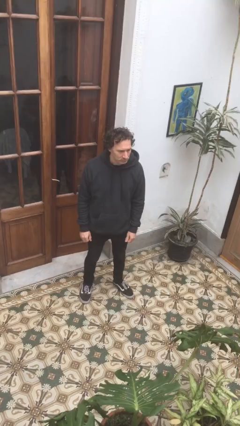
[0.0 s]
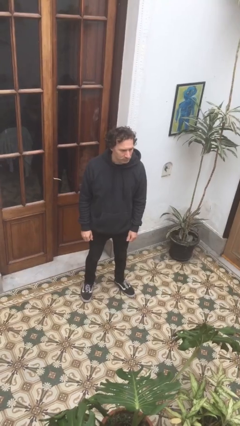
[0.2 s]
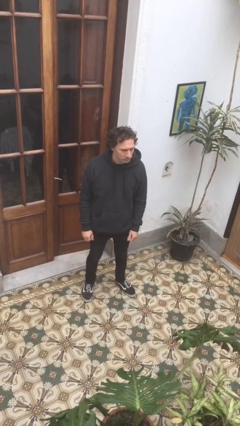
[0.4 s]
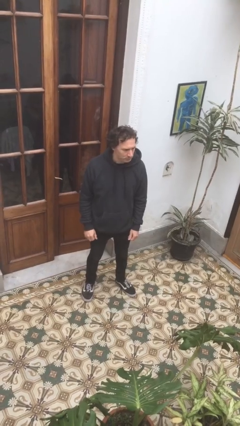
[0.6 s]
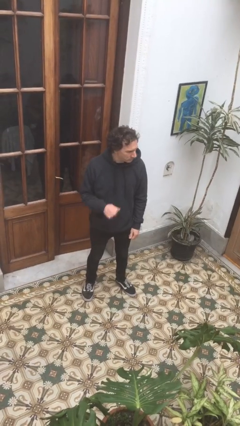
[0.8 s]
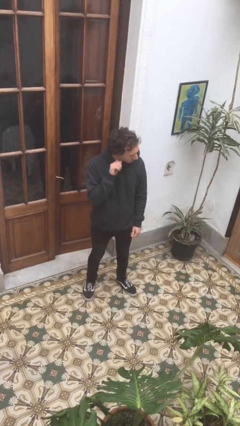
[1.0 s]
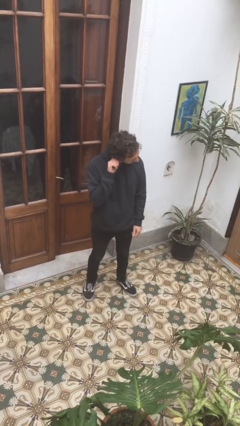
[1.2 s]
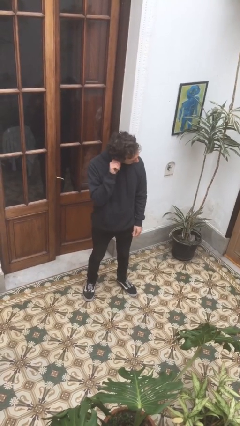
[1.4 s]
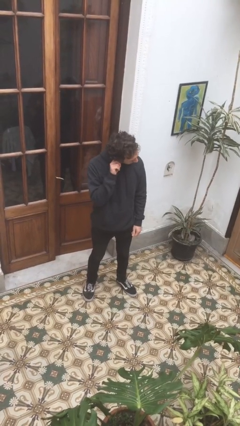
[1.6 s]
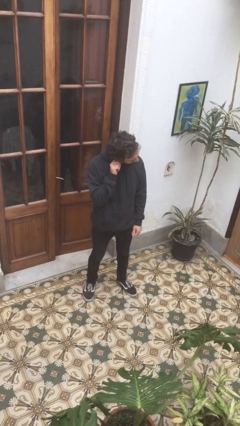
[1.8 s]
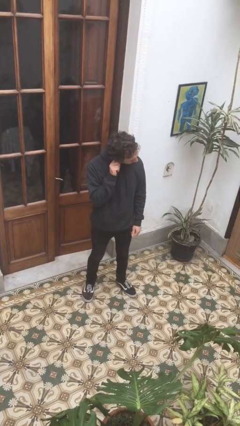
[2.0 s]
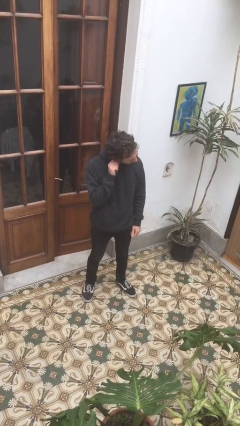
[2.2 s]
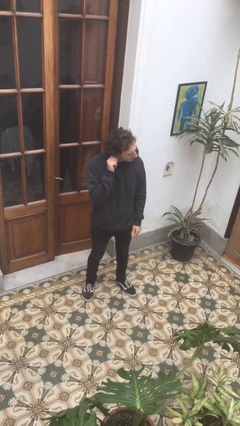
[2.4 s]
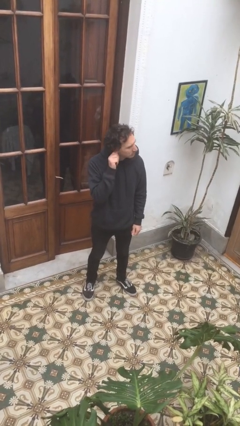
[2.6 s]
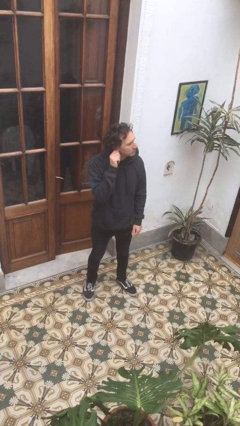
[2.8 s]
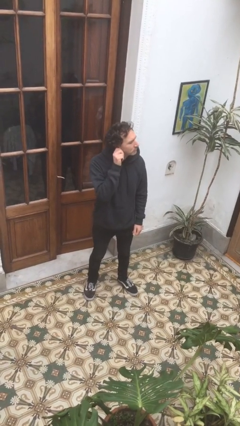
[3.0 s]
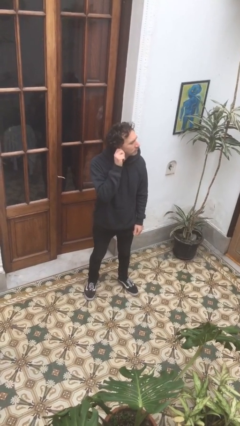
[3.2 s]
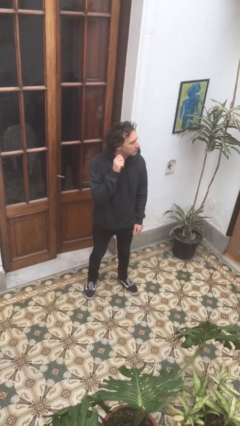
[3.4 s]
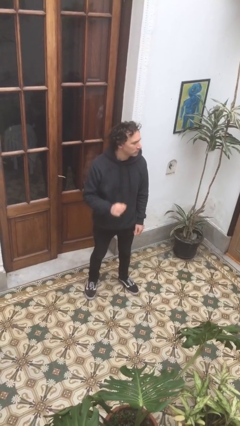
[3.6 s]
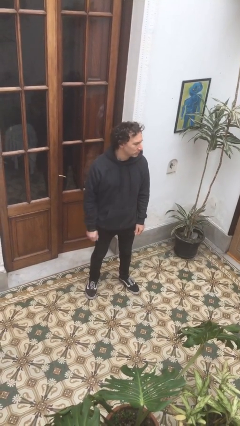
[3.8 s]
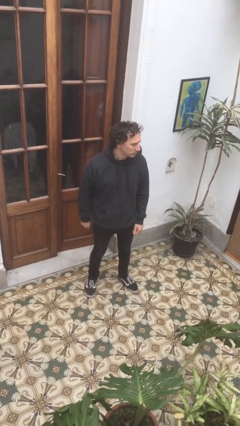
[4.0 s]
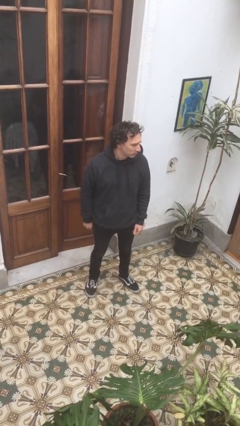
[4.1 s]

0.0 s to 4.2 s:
person touches earlobe

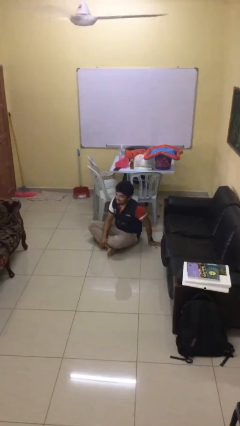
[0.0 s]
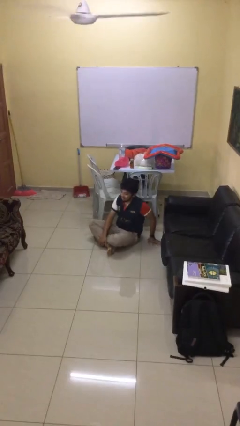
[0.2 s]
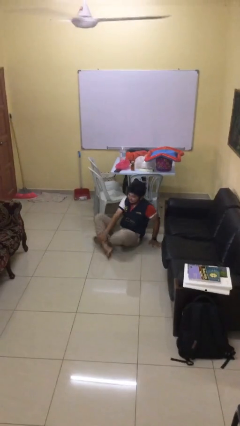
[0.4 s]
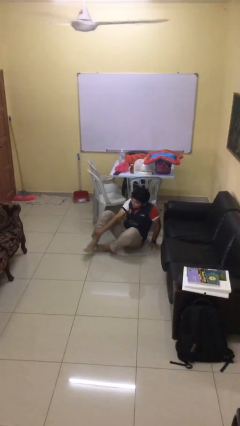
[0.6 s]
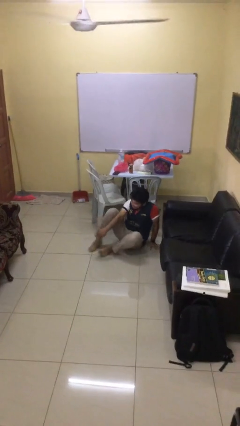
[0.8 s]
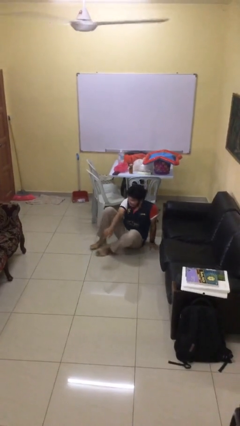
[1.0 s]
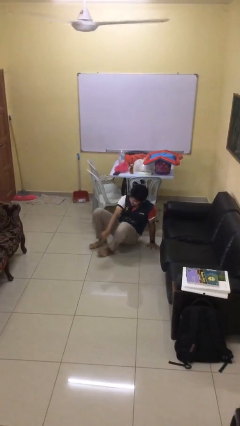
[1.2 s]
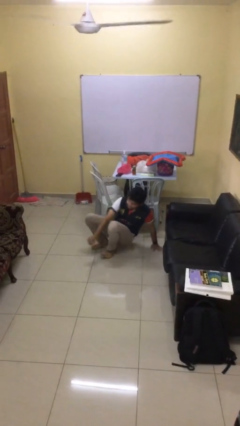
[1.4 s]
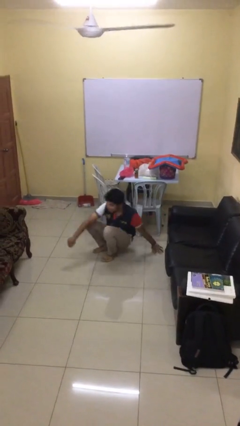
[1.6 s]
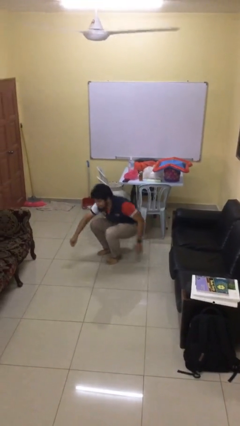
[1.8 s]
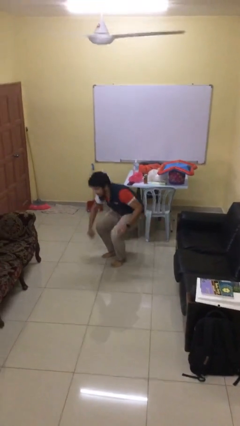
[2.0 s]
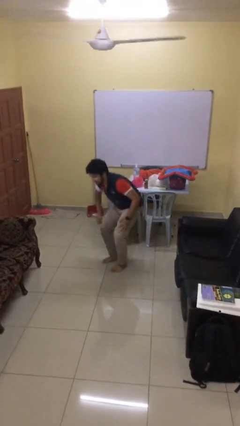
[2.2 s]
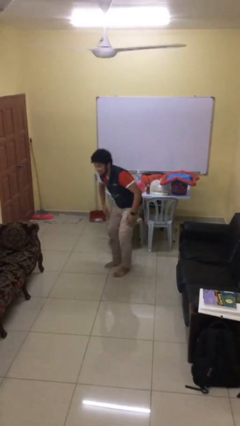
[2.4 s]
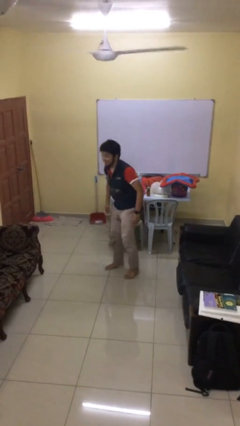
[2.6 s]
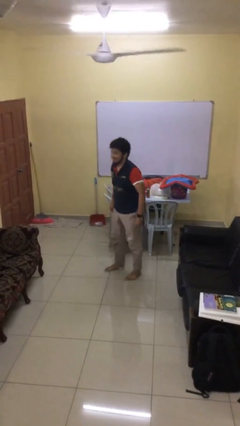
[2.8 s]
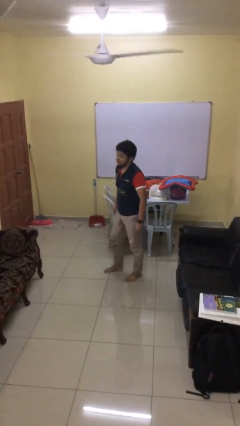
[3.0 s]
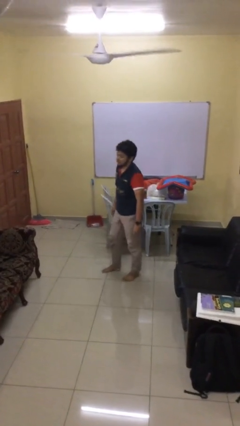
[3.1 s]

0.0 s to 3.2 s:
person stands up from floor

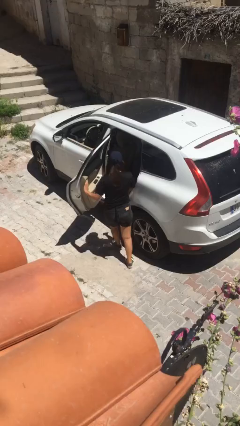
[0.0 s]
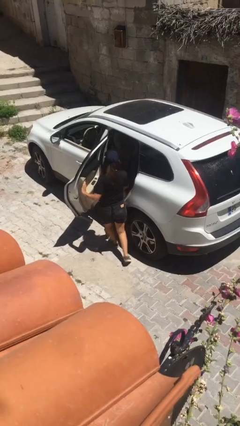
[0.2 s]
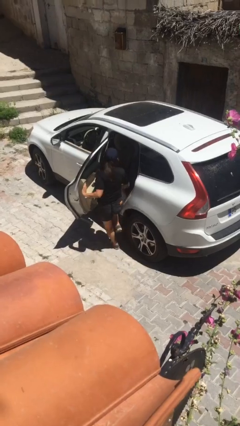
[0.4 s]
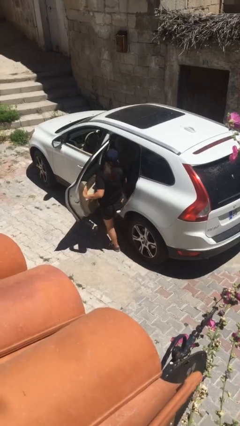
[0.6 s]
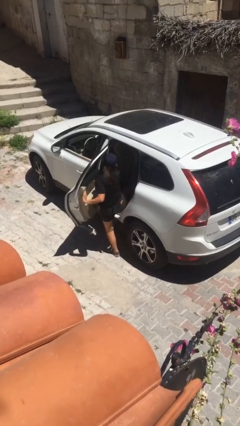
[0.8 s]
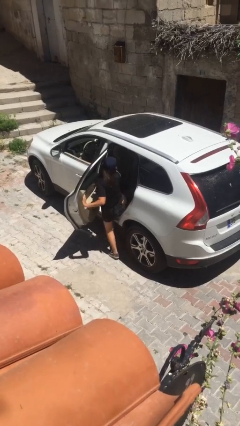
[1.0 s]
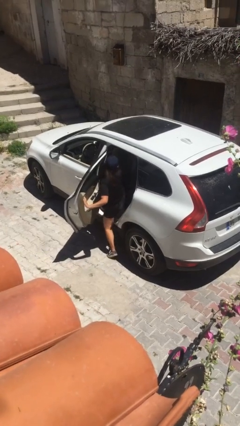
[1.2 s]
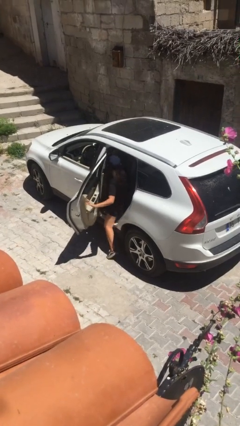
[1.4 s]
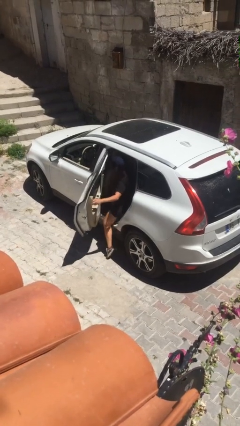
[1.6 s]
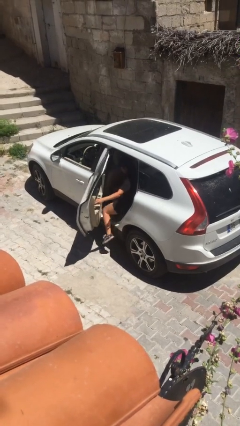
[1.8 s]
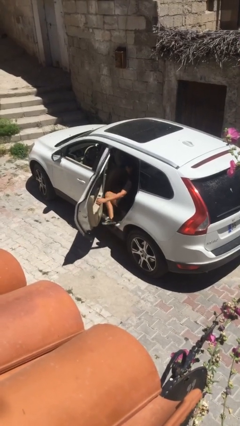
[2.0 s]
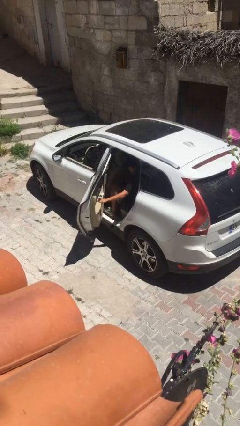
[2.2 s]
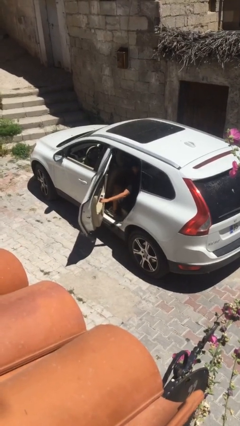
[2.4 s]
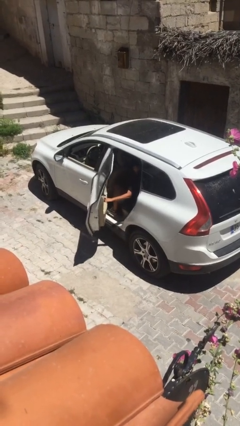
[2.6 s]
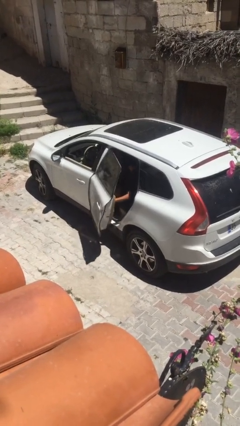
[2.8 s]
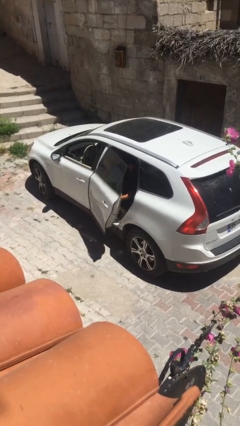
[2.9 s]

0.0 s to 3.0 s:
person enters car

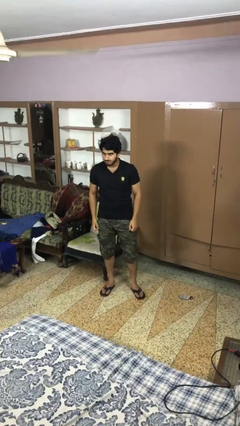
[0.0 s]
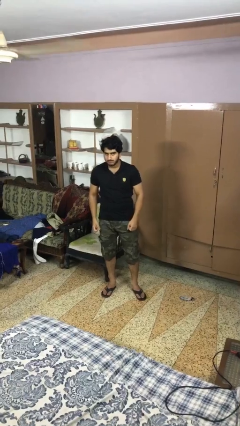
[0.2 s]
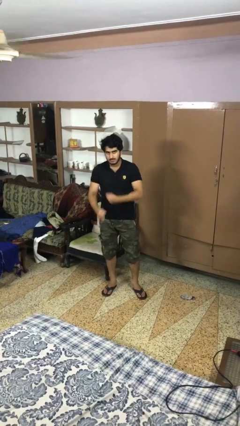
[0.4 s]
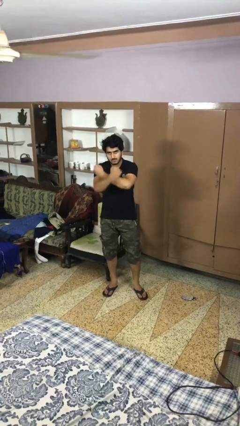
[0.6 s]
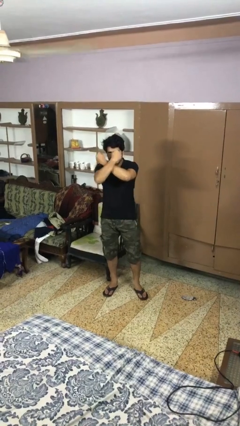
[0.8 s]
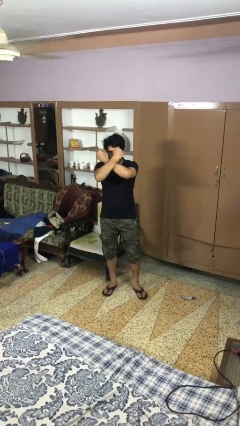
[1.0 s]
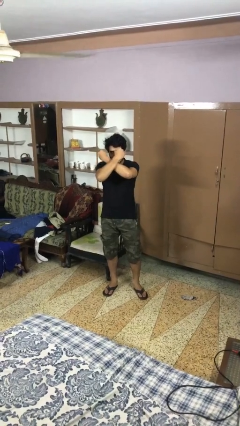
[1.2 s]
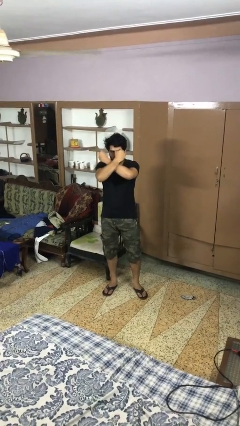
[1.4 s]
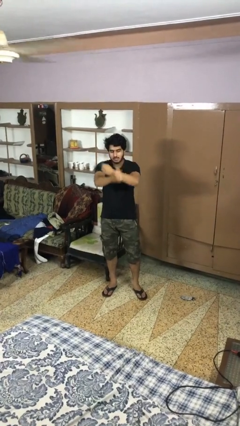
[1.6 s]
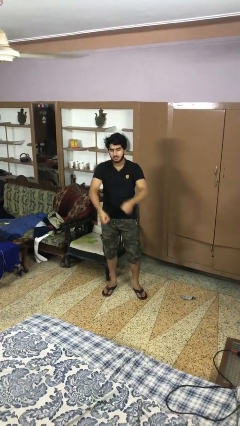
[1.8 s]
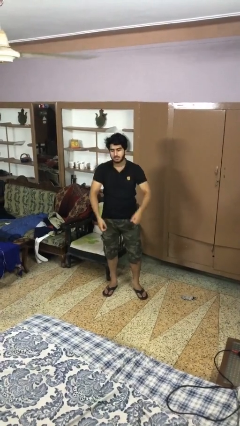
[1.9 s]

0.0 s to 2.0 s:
person gestures arms x

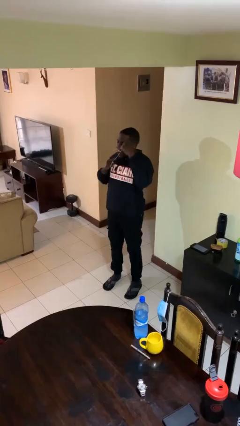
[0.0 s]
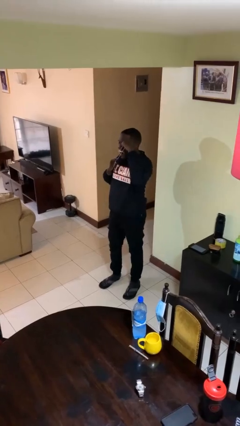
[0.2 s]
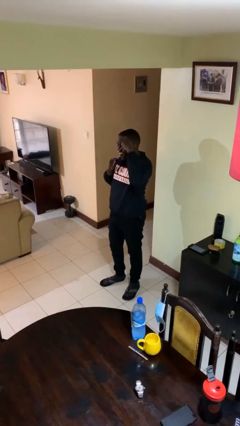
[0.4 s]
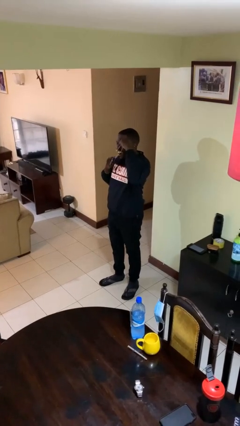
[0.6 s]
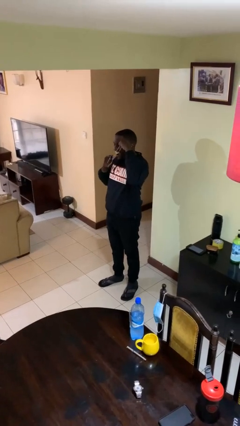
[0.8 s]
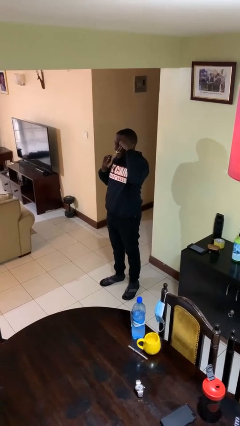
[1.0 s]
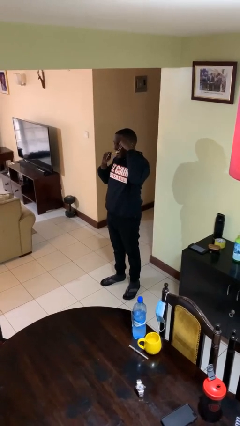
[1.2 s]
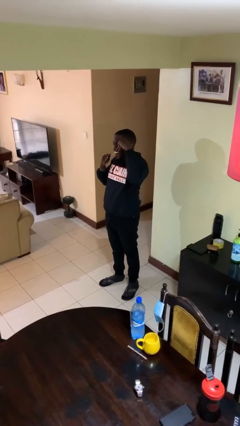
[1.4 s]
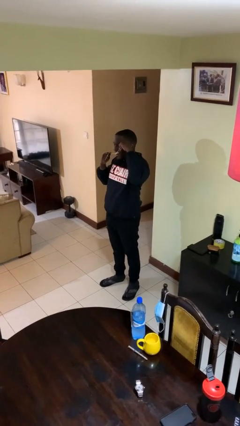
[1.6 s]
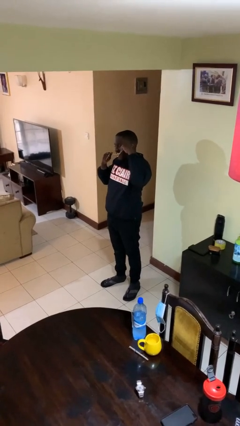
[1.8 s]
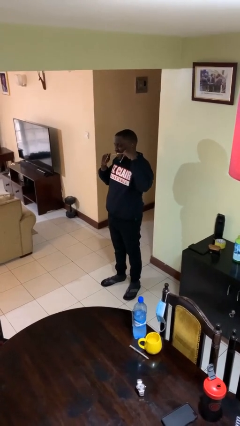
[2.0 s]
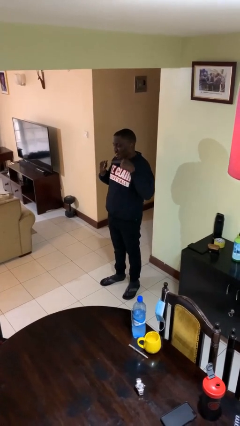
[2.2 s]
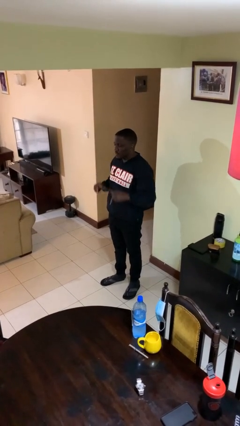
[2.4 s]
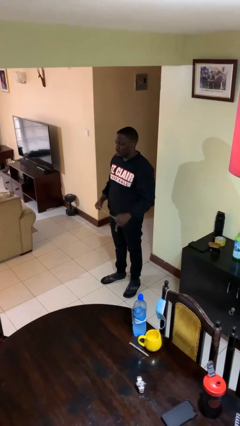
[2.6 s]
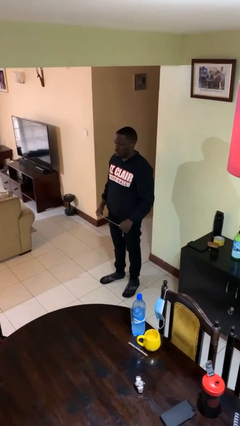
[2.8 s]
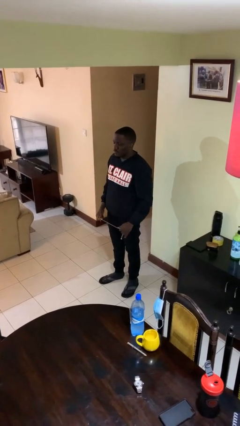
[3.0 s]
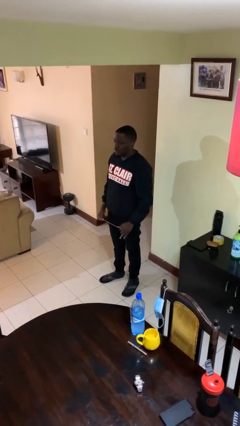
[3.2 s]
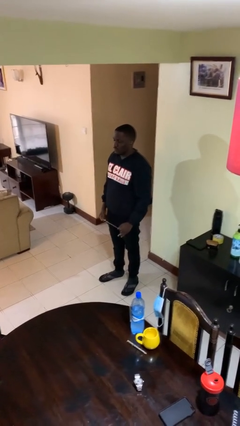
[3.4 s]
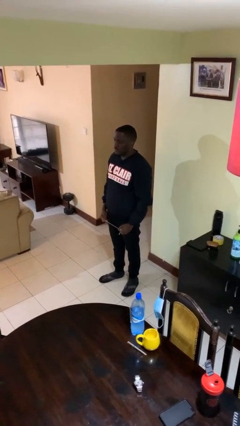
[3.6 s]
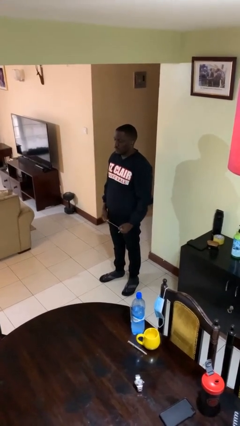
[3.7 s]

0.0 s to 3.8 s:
person flosses

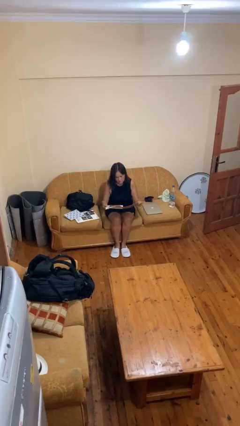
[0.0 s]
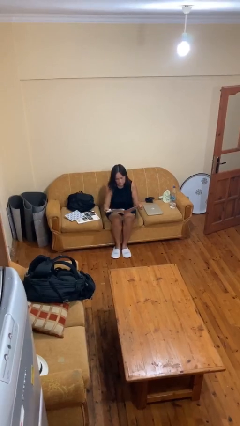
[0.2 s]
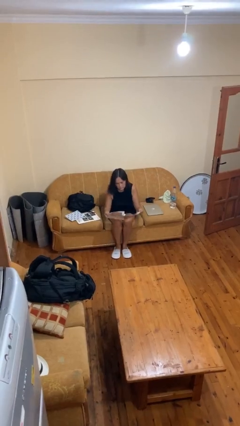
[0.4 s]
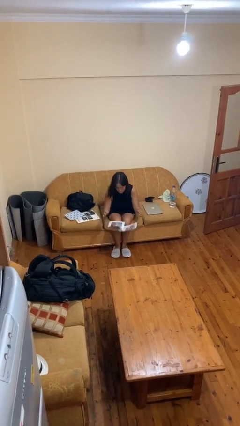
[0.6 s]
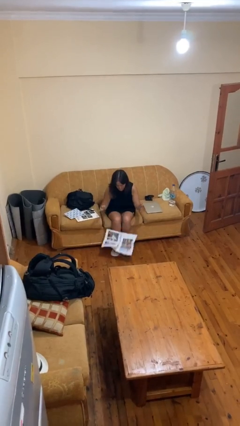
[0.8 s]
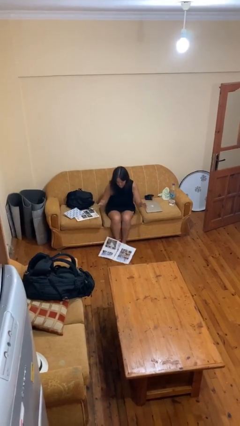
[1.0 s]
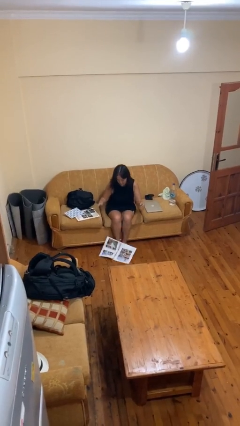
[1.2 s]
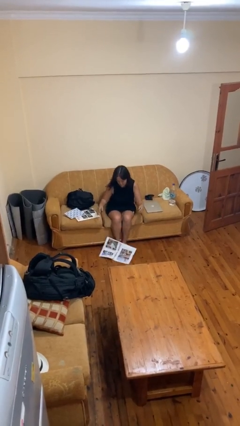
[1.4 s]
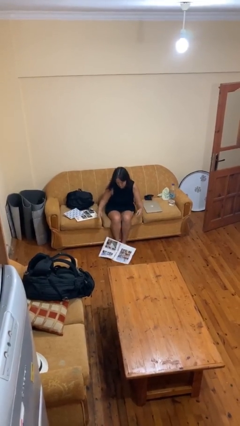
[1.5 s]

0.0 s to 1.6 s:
person drops object
